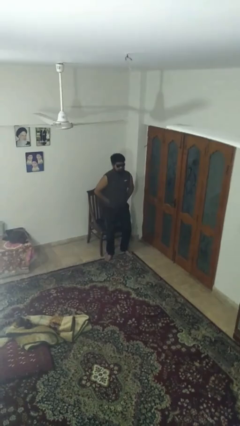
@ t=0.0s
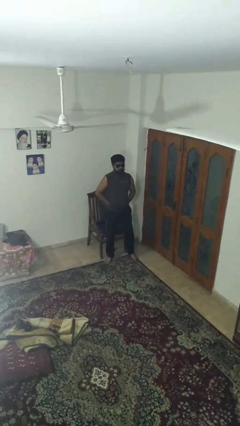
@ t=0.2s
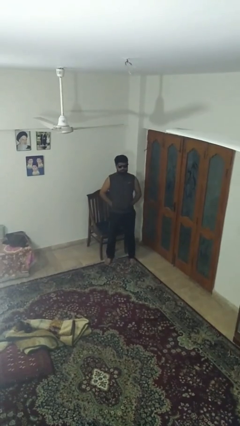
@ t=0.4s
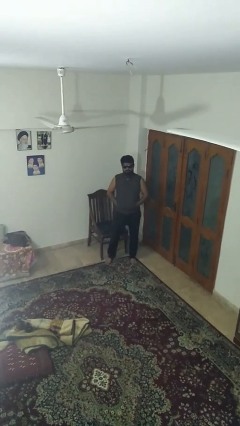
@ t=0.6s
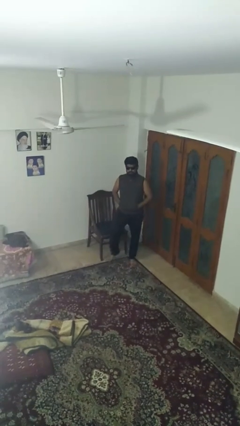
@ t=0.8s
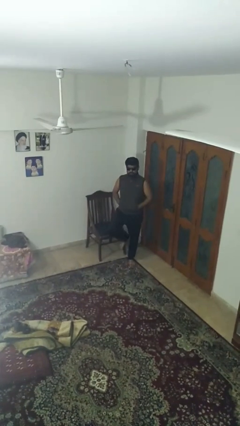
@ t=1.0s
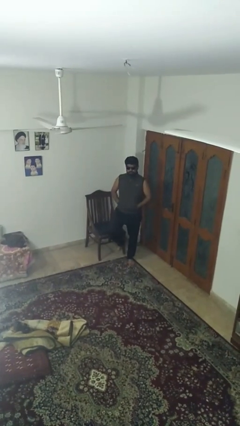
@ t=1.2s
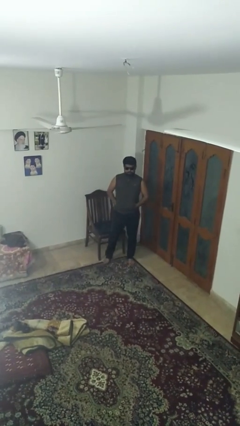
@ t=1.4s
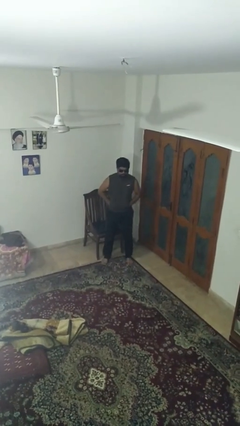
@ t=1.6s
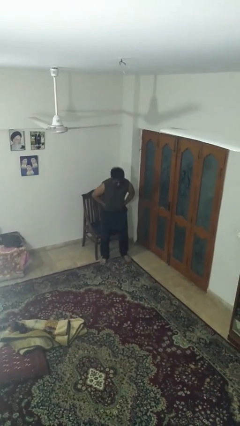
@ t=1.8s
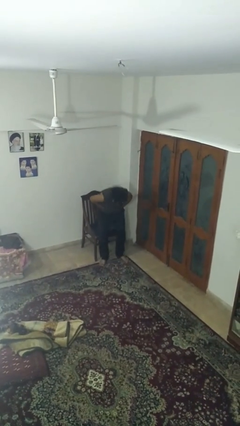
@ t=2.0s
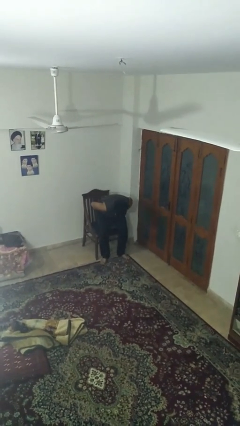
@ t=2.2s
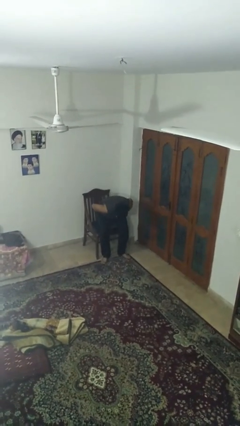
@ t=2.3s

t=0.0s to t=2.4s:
person sits down

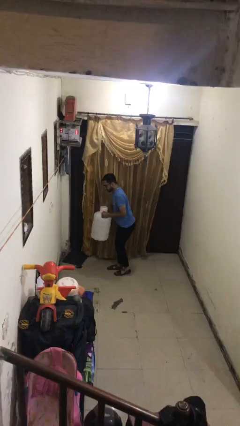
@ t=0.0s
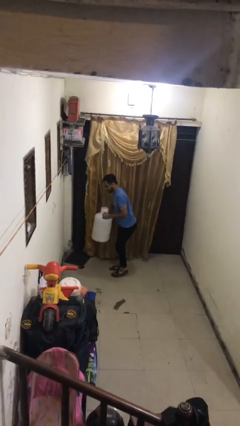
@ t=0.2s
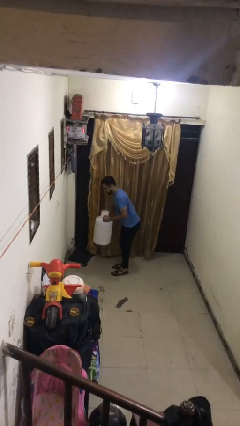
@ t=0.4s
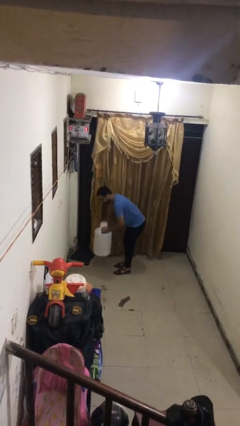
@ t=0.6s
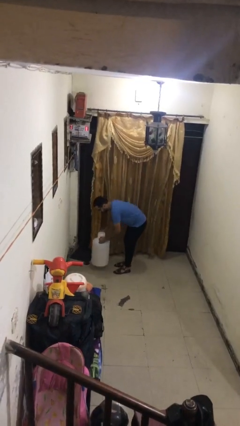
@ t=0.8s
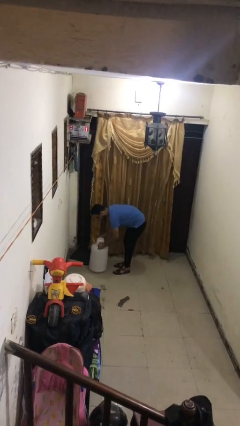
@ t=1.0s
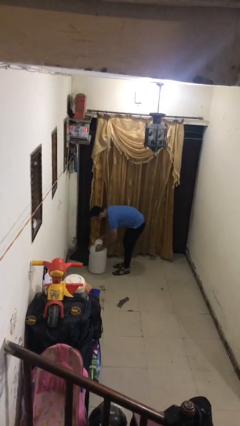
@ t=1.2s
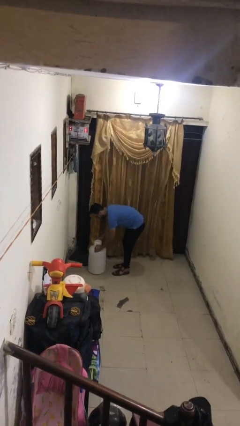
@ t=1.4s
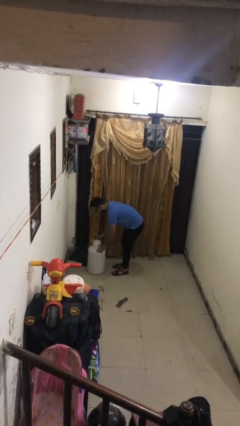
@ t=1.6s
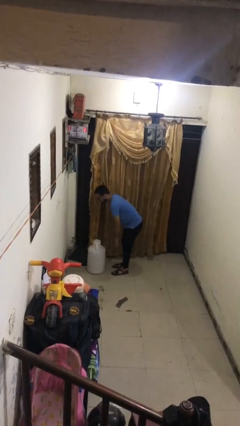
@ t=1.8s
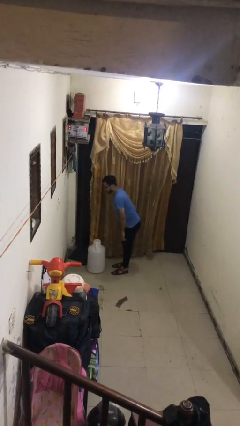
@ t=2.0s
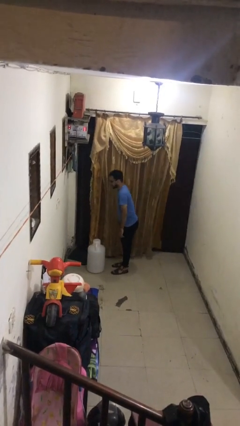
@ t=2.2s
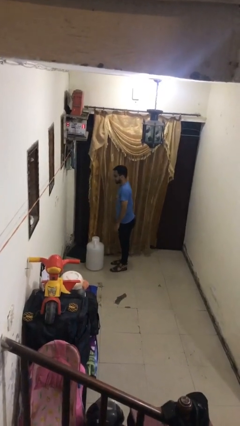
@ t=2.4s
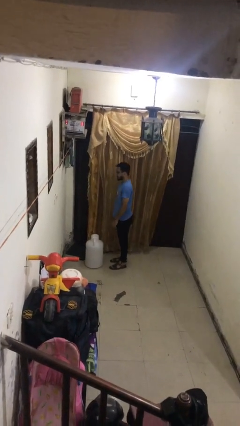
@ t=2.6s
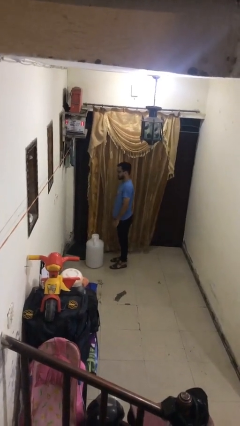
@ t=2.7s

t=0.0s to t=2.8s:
person puts down object on floor

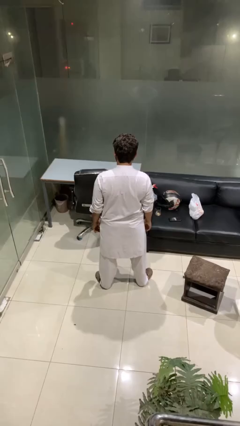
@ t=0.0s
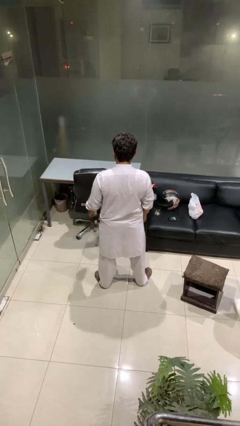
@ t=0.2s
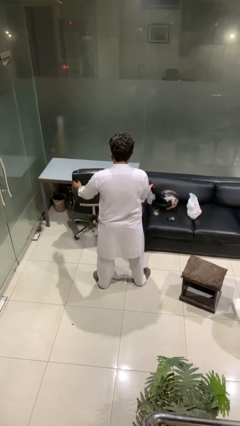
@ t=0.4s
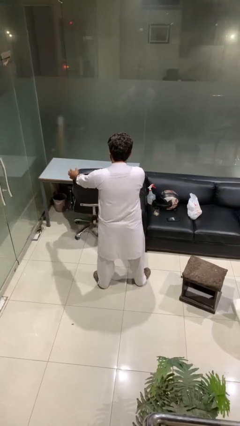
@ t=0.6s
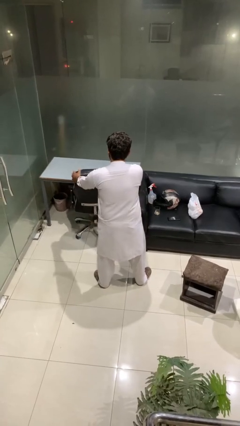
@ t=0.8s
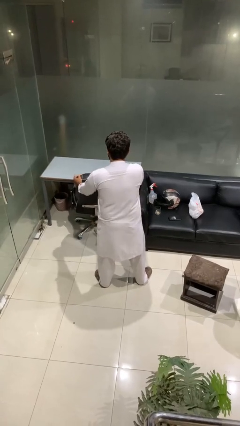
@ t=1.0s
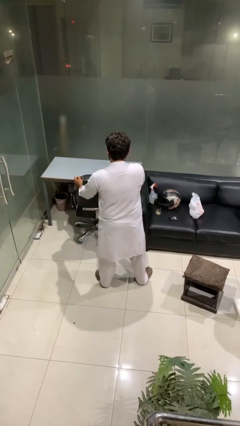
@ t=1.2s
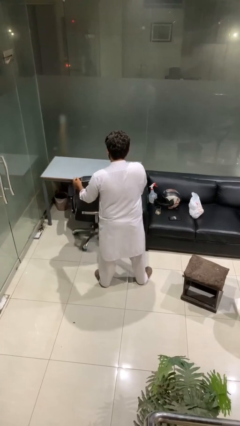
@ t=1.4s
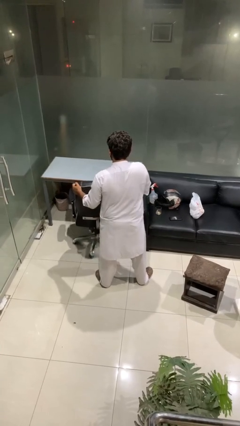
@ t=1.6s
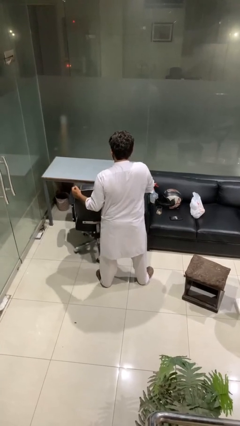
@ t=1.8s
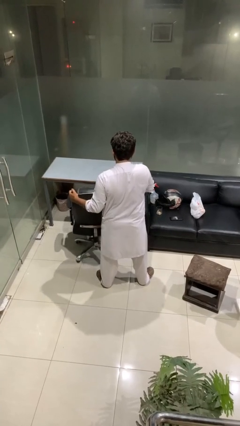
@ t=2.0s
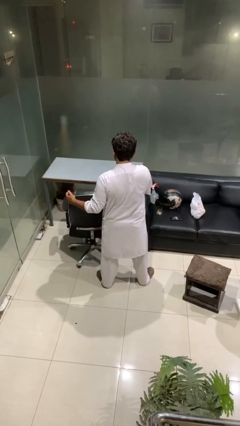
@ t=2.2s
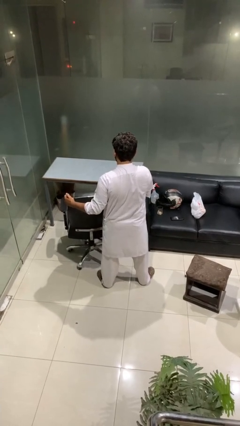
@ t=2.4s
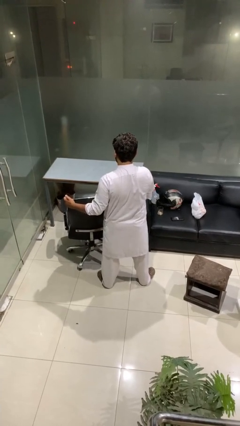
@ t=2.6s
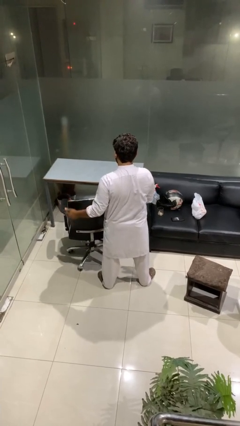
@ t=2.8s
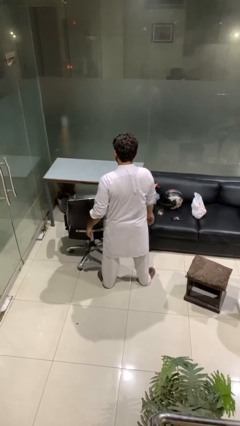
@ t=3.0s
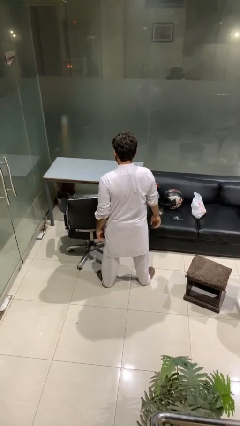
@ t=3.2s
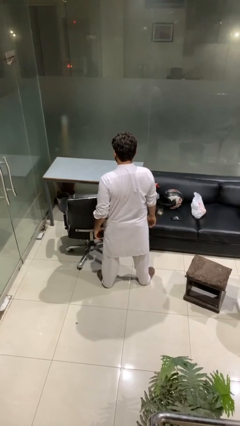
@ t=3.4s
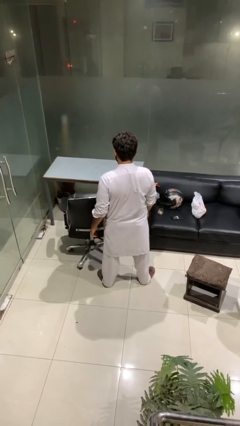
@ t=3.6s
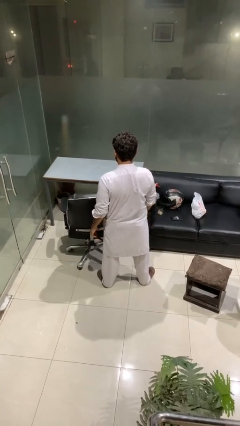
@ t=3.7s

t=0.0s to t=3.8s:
person pulls out chair

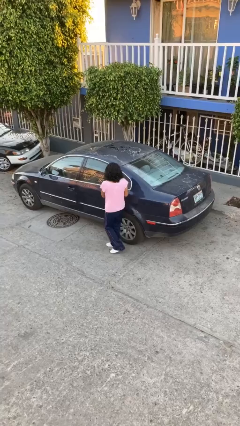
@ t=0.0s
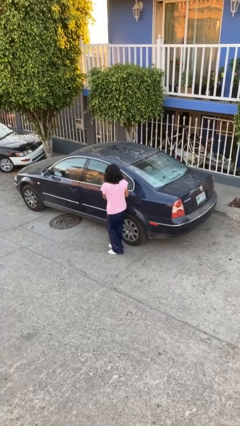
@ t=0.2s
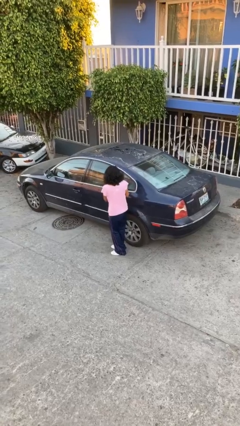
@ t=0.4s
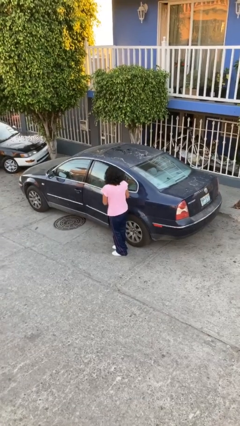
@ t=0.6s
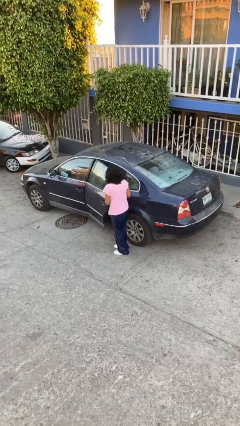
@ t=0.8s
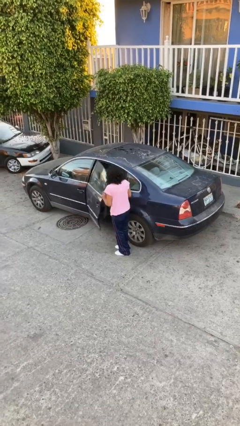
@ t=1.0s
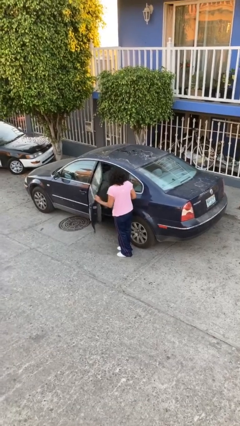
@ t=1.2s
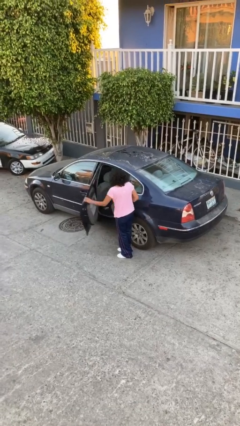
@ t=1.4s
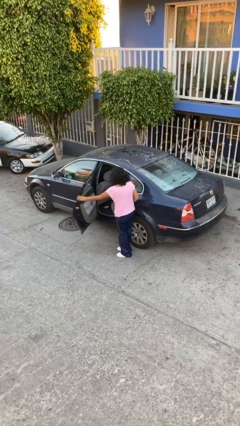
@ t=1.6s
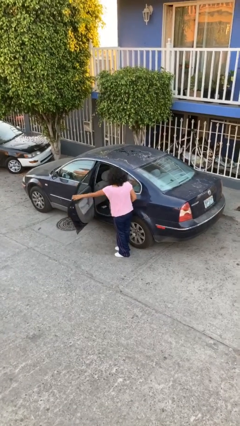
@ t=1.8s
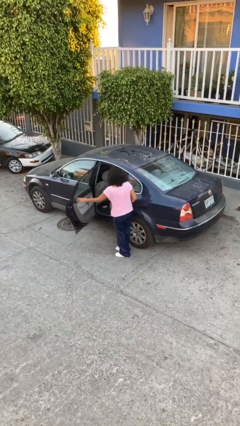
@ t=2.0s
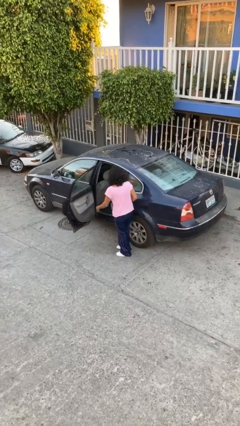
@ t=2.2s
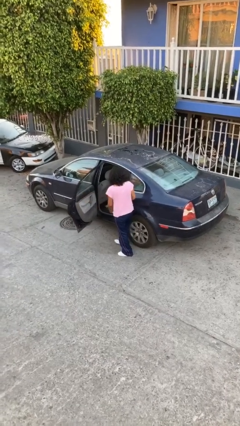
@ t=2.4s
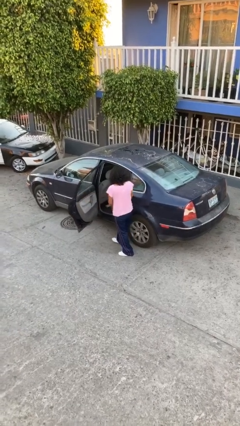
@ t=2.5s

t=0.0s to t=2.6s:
person opens car door

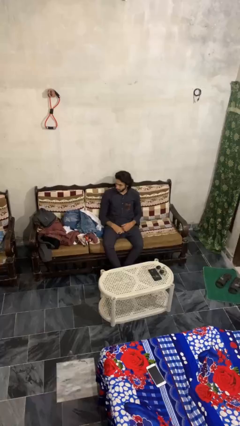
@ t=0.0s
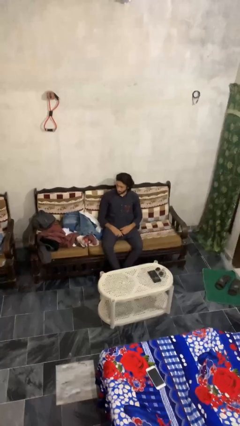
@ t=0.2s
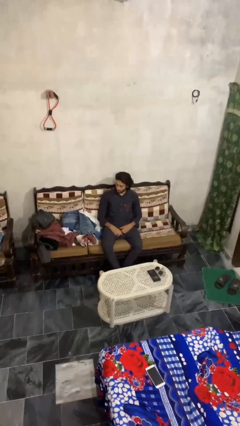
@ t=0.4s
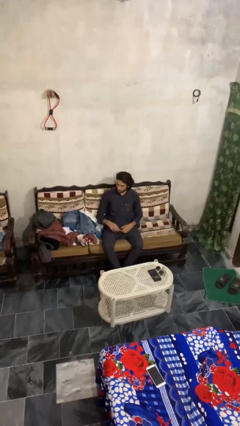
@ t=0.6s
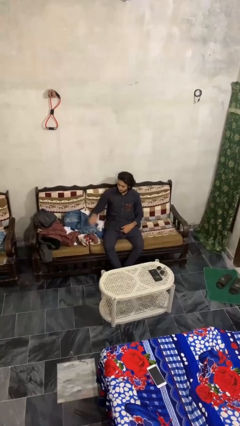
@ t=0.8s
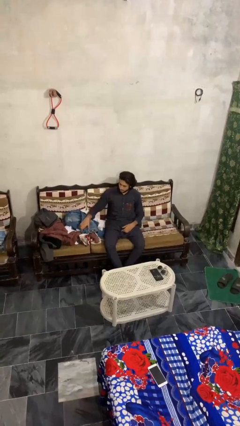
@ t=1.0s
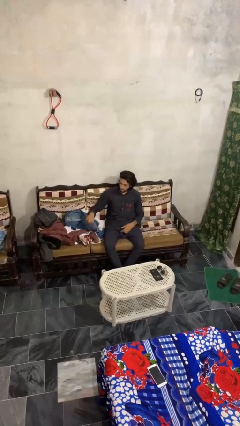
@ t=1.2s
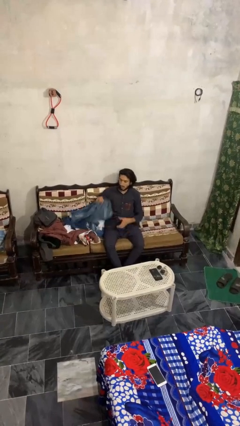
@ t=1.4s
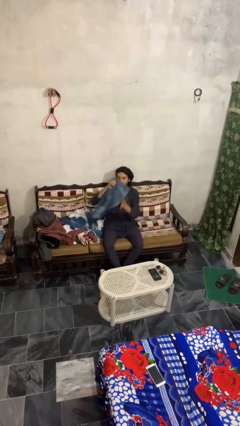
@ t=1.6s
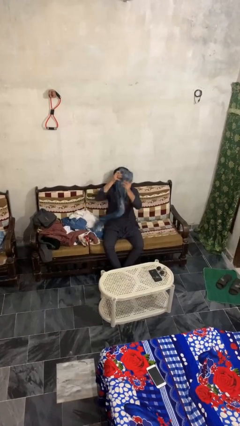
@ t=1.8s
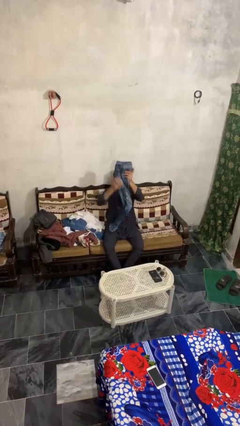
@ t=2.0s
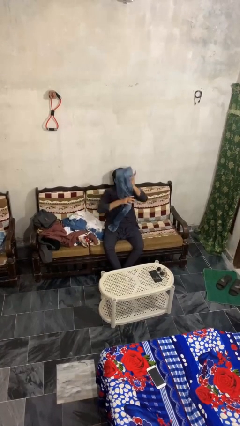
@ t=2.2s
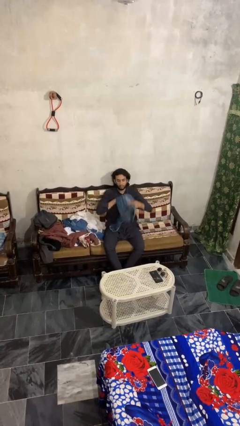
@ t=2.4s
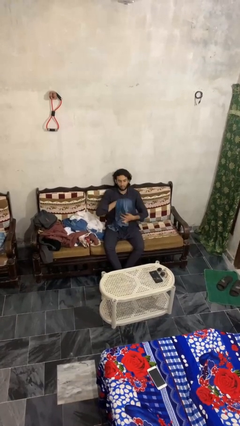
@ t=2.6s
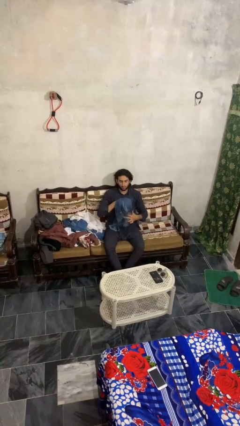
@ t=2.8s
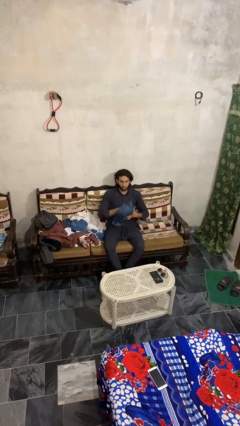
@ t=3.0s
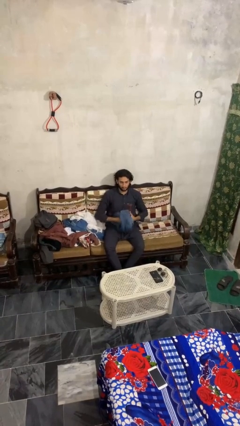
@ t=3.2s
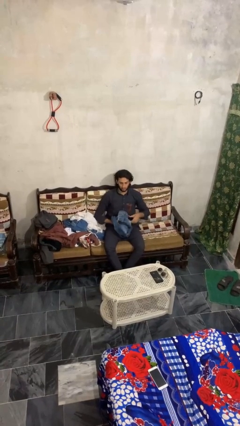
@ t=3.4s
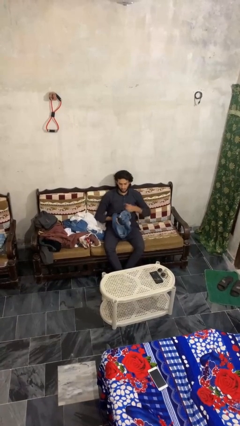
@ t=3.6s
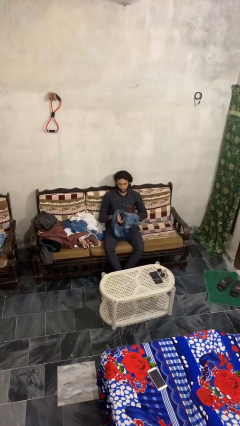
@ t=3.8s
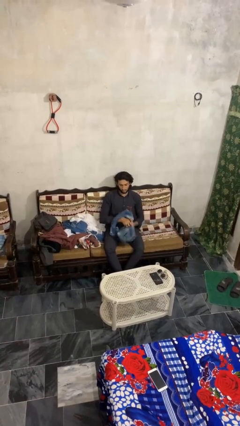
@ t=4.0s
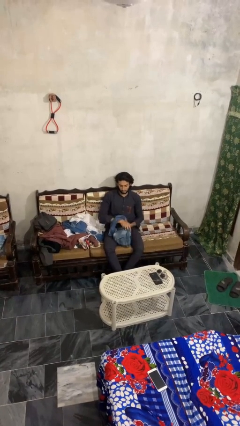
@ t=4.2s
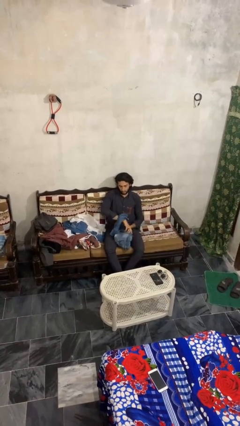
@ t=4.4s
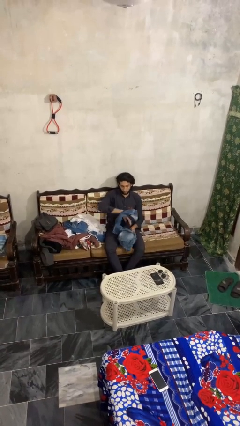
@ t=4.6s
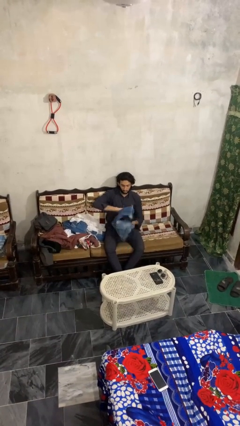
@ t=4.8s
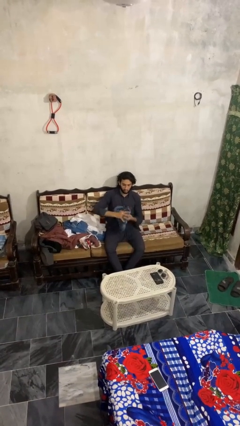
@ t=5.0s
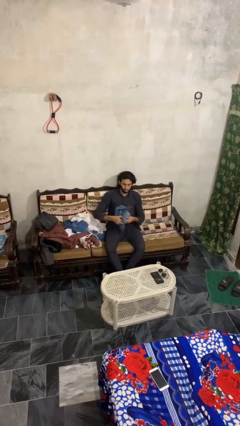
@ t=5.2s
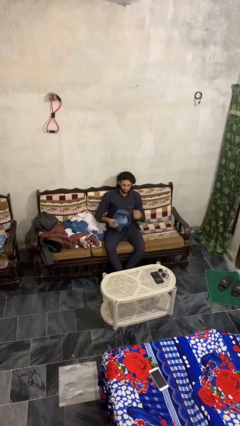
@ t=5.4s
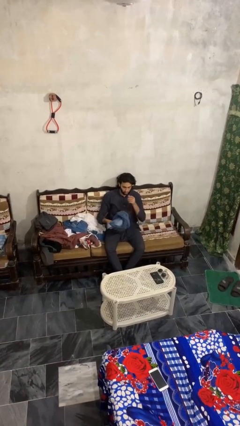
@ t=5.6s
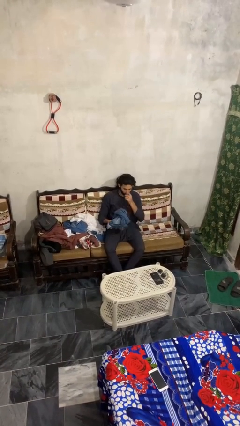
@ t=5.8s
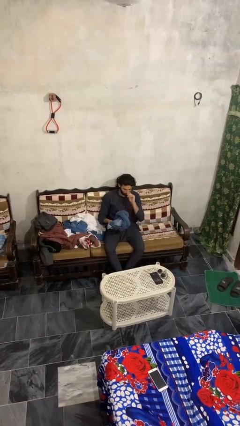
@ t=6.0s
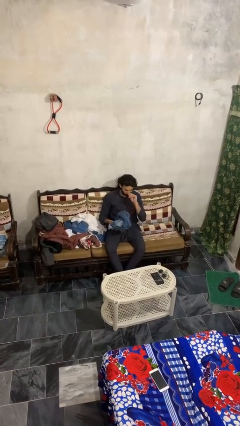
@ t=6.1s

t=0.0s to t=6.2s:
person folds pants
